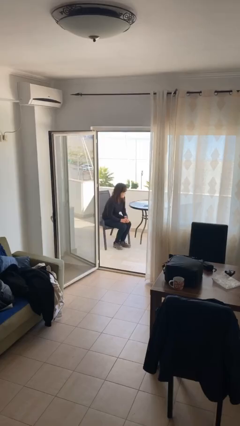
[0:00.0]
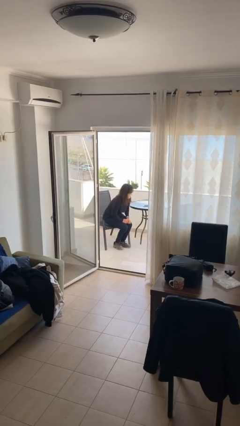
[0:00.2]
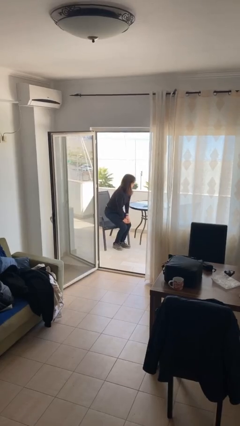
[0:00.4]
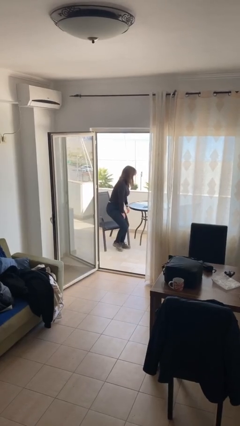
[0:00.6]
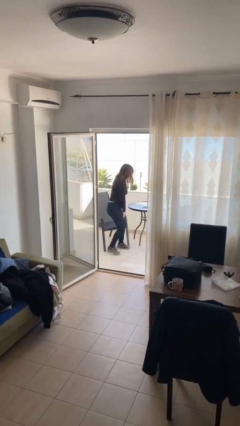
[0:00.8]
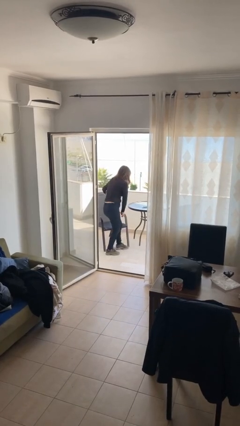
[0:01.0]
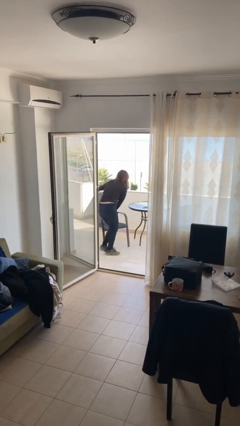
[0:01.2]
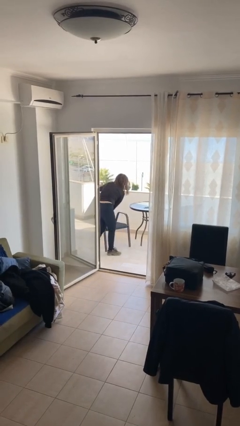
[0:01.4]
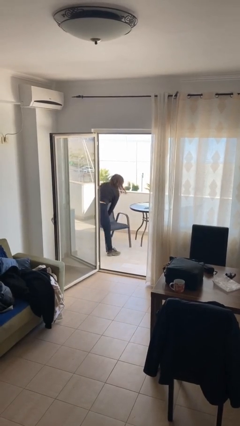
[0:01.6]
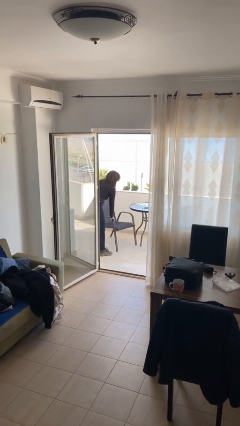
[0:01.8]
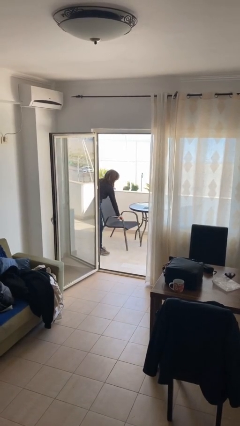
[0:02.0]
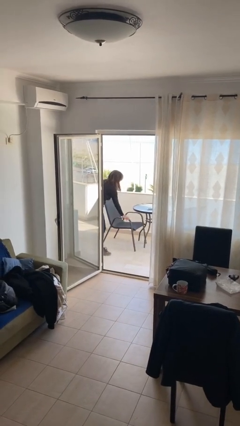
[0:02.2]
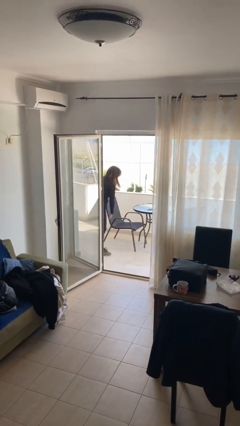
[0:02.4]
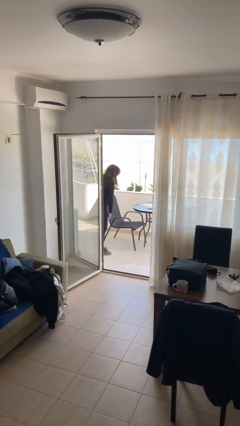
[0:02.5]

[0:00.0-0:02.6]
person stands up

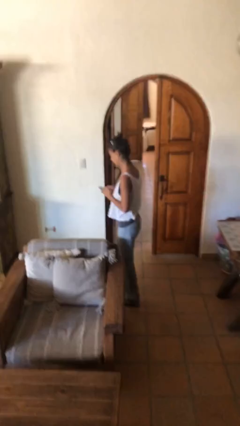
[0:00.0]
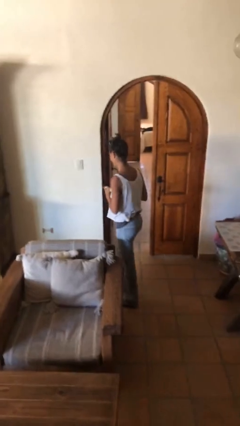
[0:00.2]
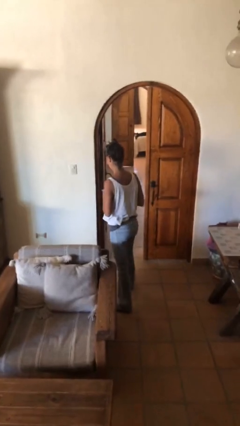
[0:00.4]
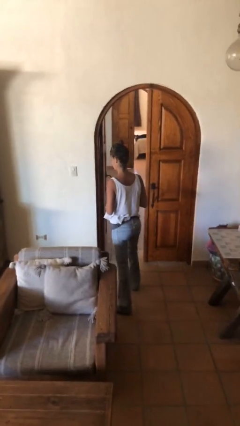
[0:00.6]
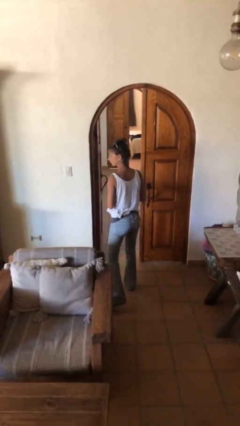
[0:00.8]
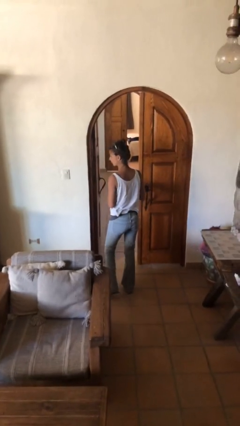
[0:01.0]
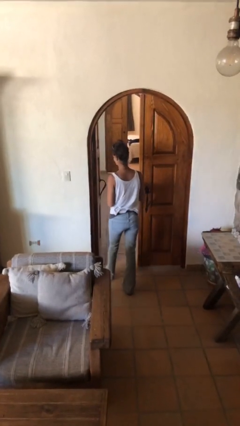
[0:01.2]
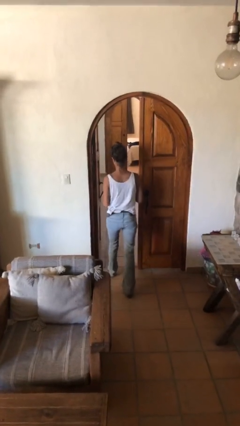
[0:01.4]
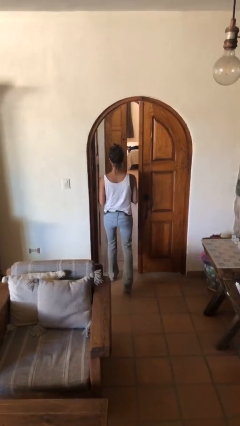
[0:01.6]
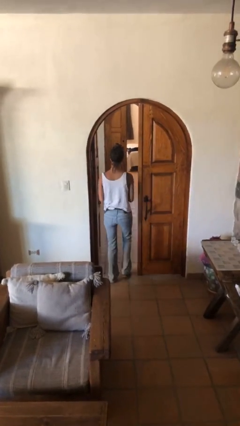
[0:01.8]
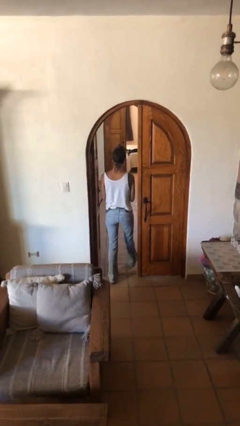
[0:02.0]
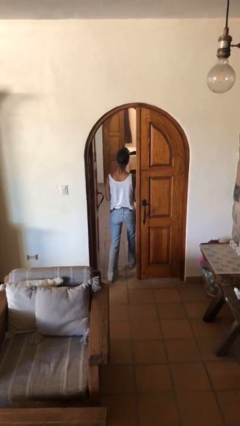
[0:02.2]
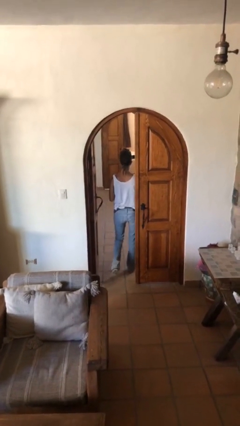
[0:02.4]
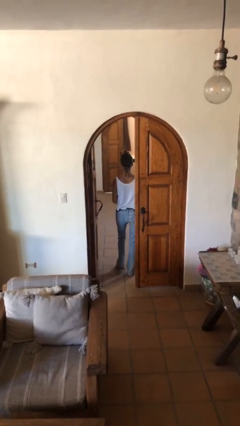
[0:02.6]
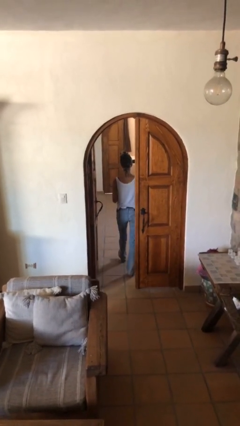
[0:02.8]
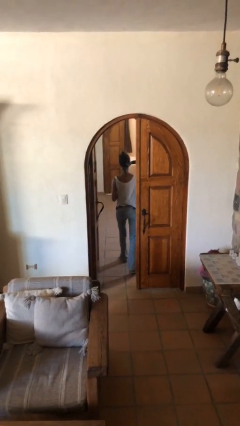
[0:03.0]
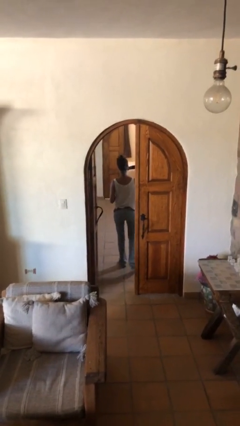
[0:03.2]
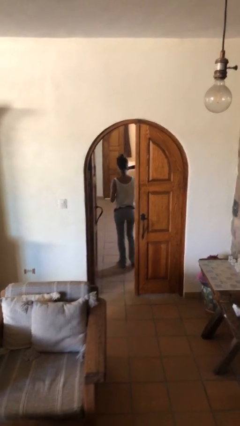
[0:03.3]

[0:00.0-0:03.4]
person exits scene through structure

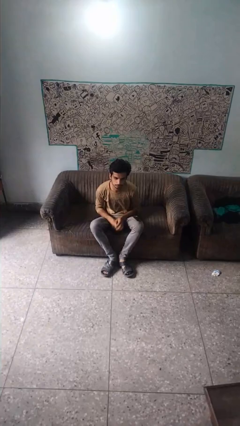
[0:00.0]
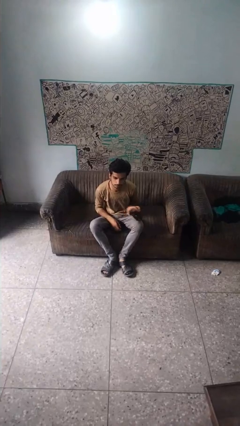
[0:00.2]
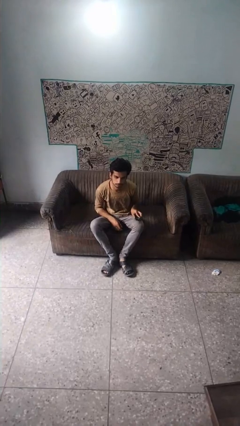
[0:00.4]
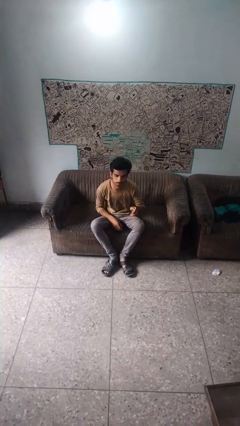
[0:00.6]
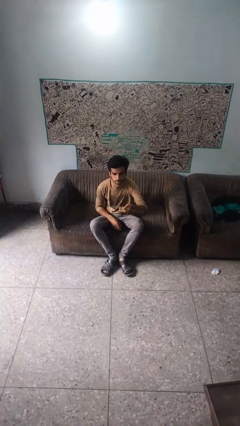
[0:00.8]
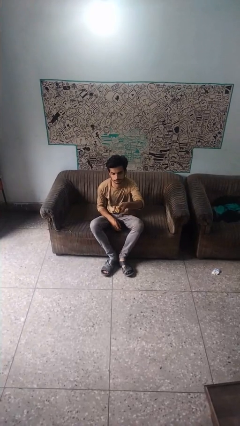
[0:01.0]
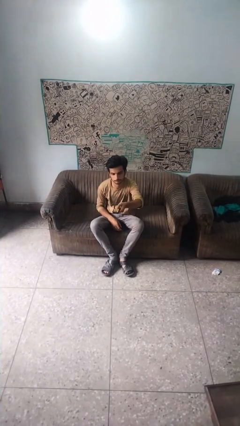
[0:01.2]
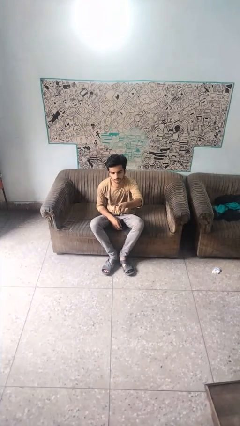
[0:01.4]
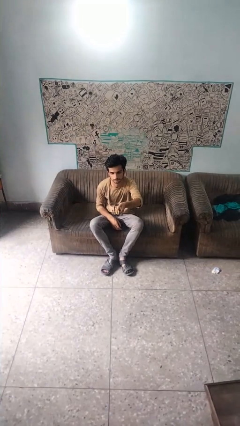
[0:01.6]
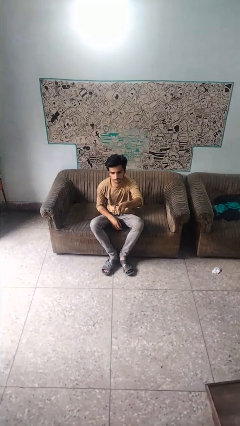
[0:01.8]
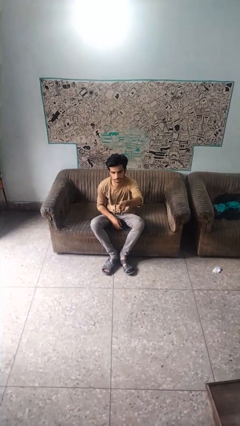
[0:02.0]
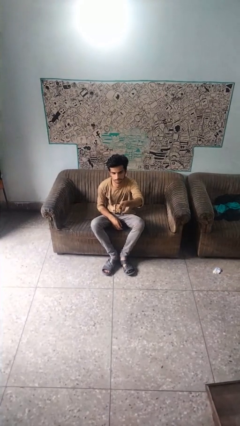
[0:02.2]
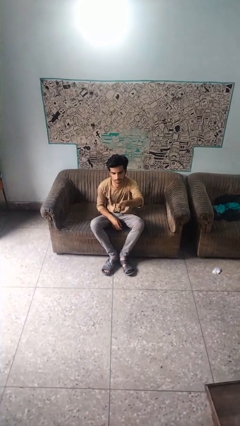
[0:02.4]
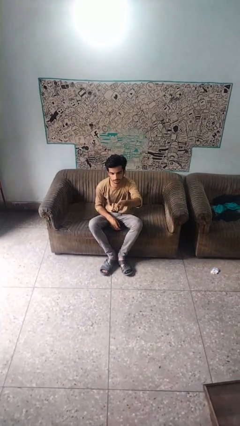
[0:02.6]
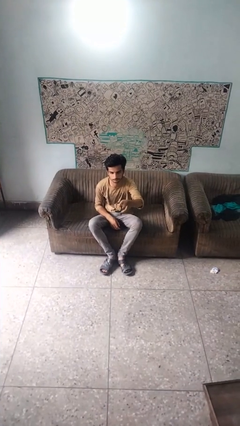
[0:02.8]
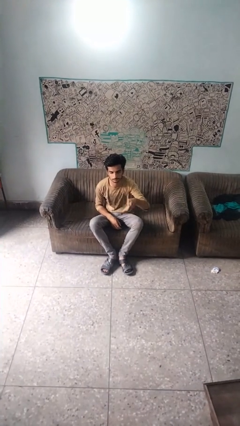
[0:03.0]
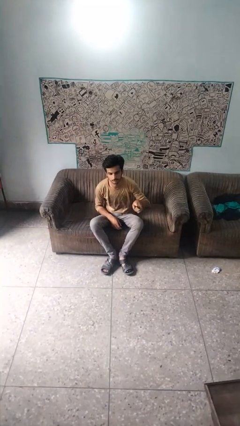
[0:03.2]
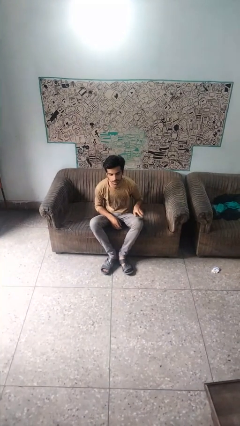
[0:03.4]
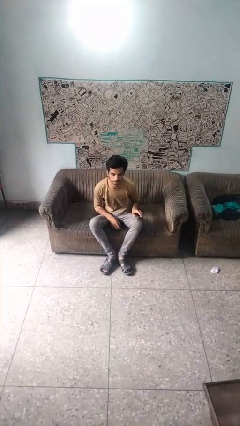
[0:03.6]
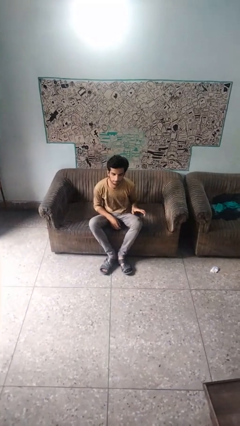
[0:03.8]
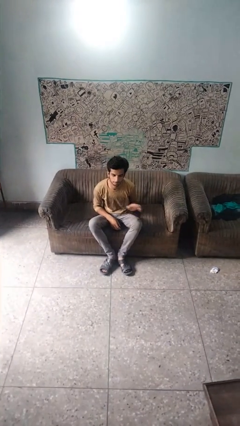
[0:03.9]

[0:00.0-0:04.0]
person uses television remote

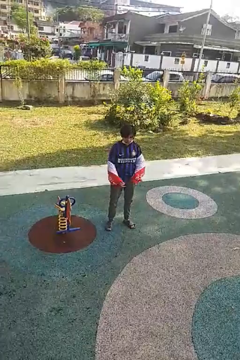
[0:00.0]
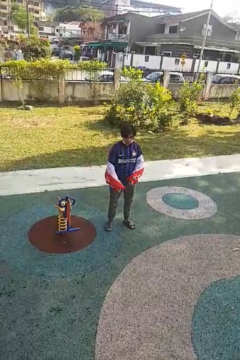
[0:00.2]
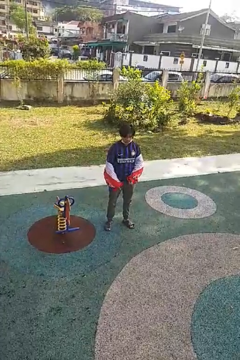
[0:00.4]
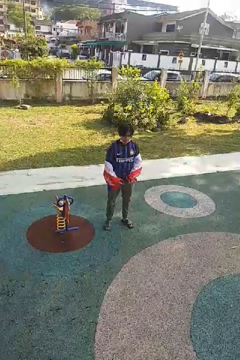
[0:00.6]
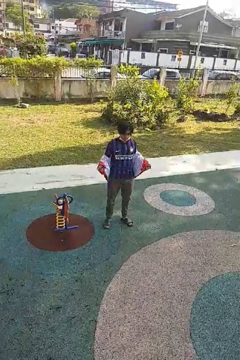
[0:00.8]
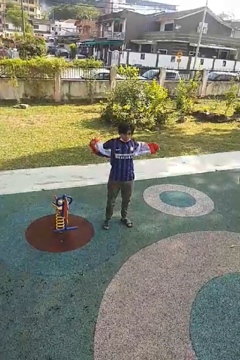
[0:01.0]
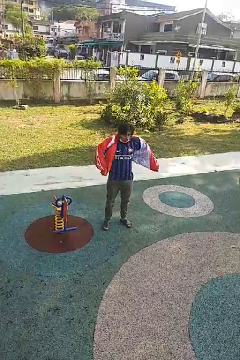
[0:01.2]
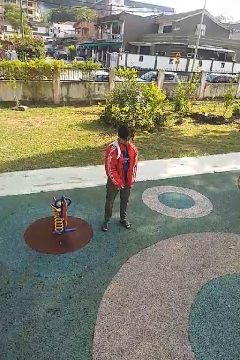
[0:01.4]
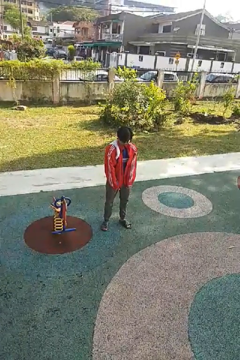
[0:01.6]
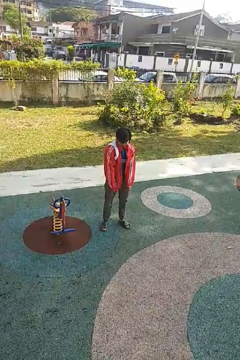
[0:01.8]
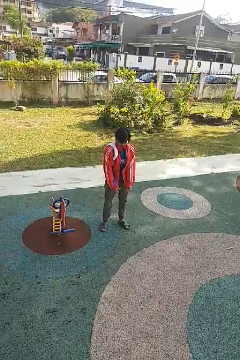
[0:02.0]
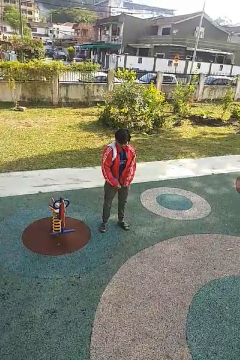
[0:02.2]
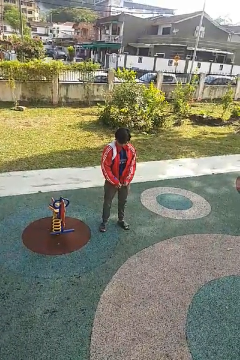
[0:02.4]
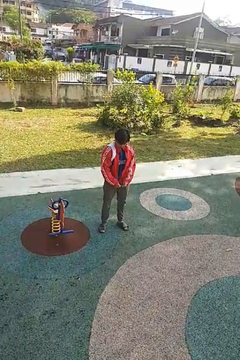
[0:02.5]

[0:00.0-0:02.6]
person puts on jacket

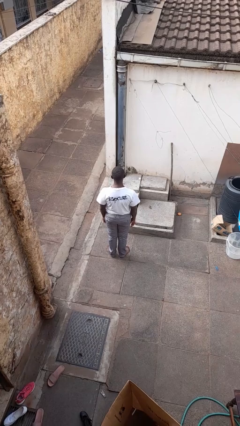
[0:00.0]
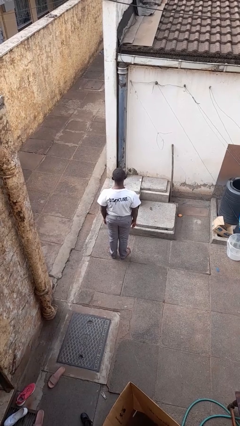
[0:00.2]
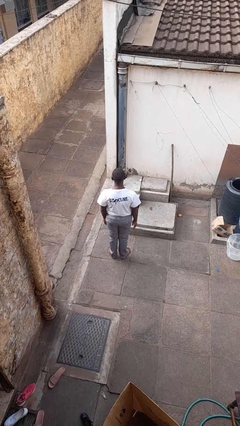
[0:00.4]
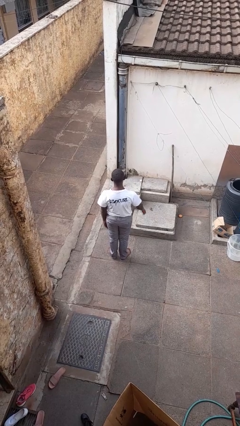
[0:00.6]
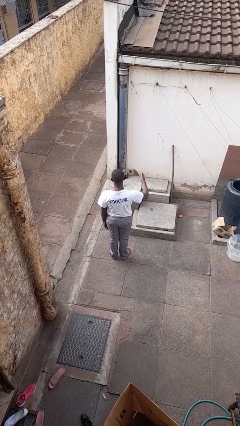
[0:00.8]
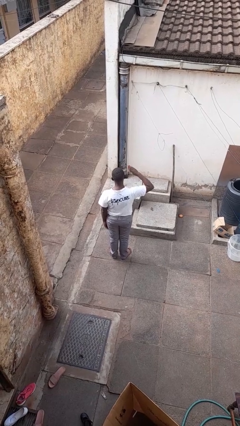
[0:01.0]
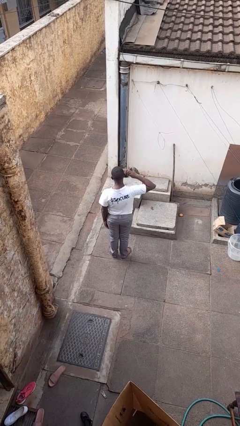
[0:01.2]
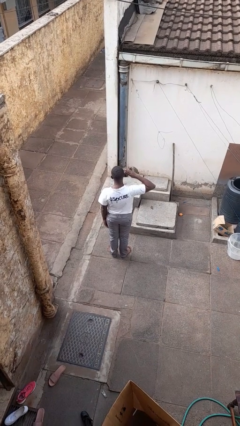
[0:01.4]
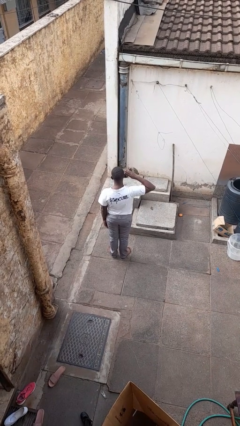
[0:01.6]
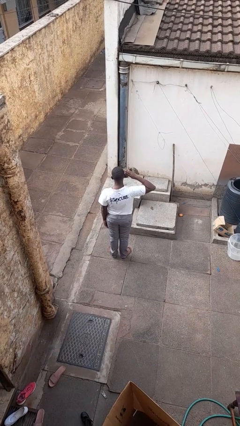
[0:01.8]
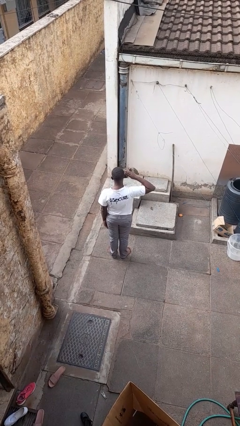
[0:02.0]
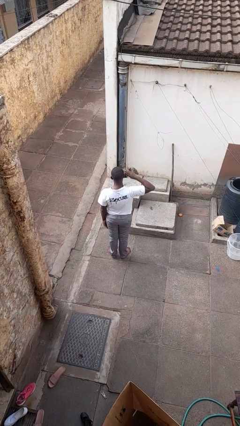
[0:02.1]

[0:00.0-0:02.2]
person salutes

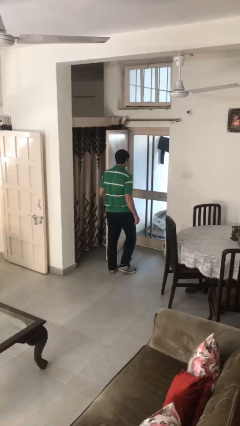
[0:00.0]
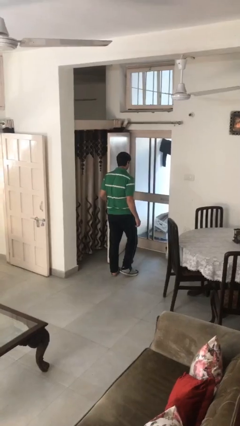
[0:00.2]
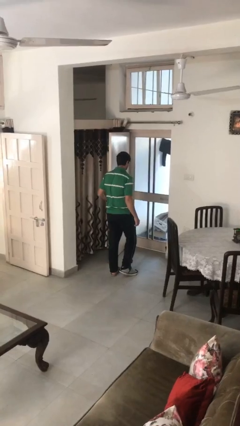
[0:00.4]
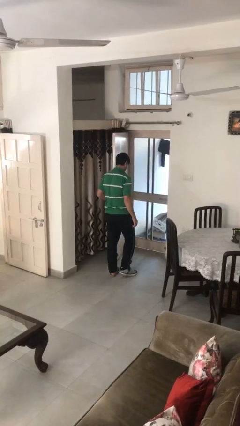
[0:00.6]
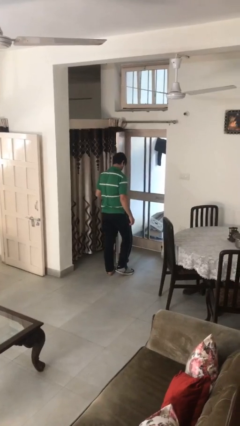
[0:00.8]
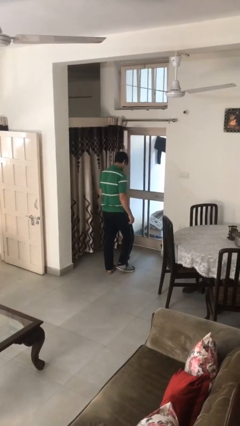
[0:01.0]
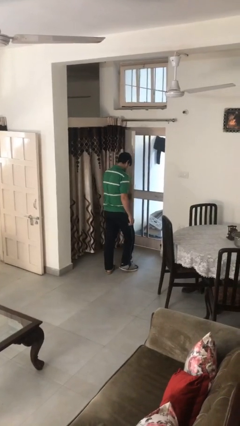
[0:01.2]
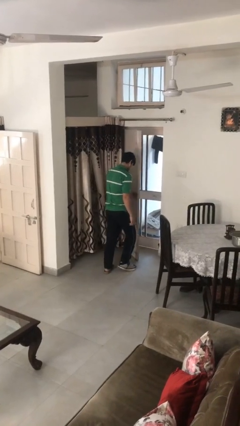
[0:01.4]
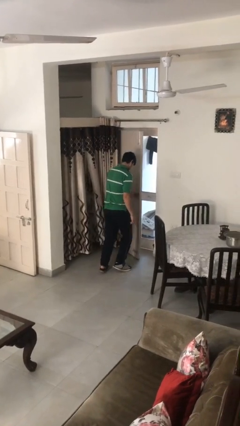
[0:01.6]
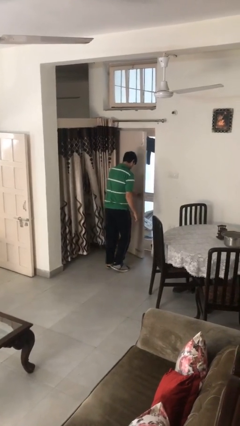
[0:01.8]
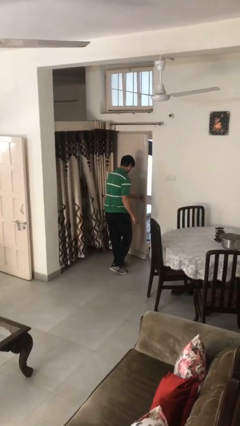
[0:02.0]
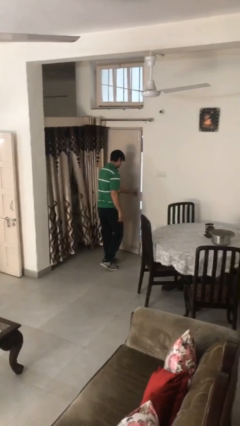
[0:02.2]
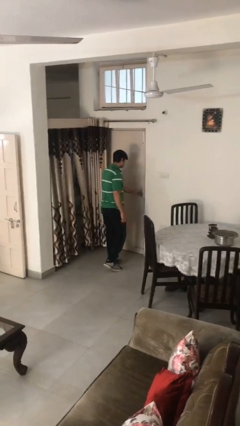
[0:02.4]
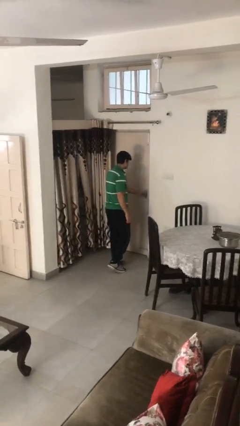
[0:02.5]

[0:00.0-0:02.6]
person closes facility door

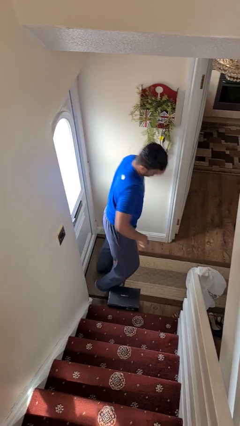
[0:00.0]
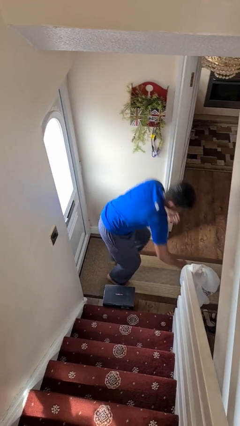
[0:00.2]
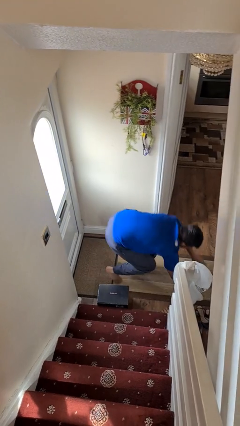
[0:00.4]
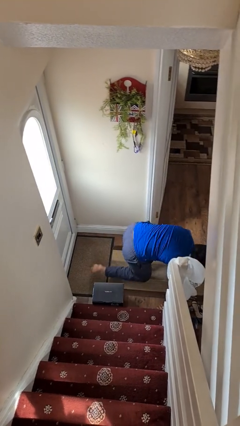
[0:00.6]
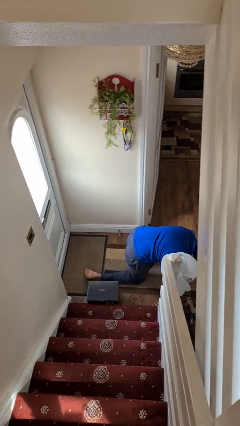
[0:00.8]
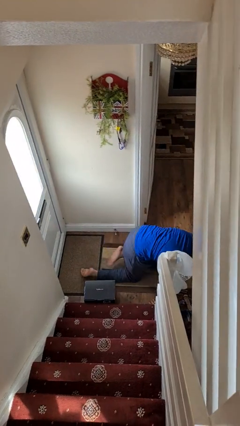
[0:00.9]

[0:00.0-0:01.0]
person trips on object on floor
